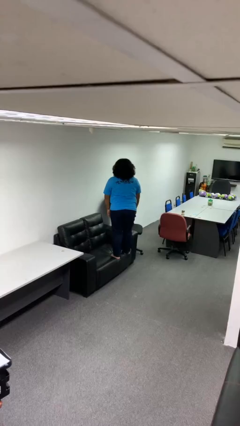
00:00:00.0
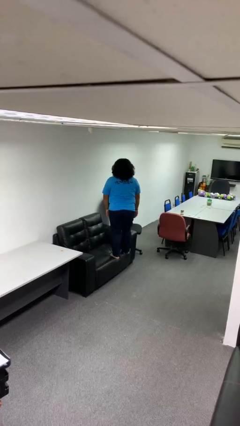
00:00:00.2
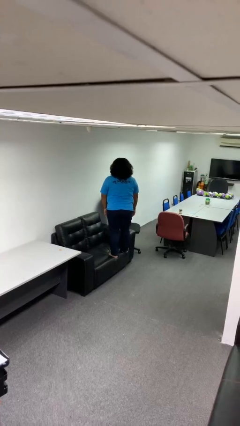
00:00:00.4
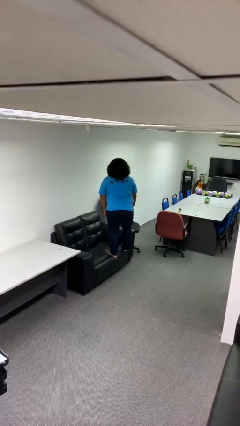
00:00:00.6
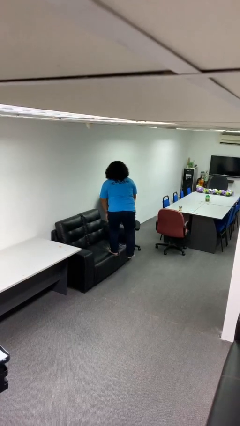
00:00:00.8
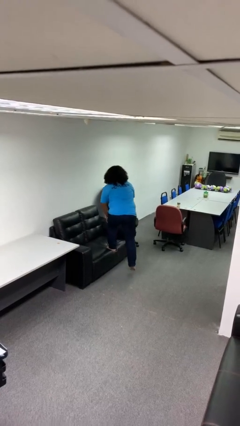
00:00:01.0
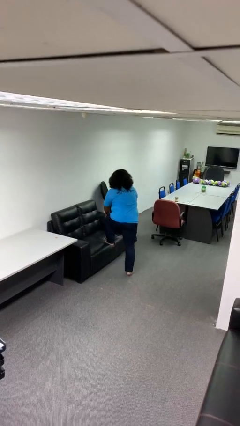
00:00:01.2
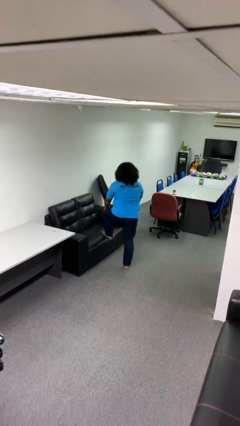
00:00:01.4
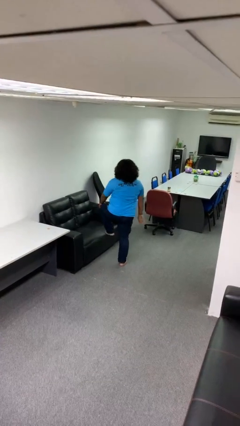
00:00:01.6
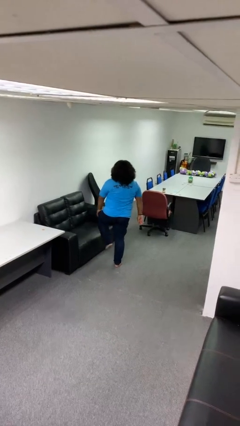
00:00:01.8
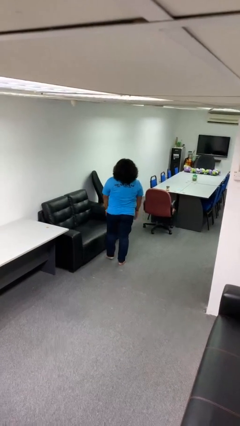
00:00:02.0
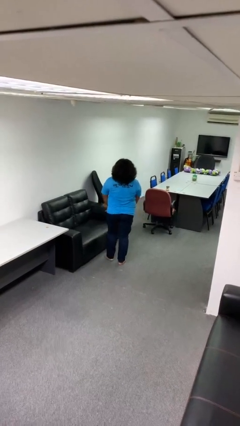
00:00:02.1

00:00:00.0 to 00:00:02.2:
person climbs off couch

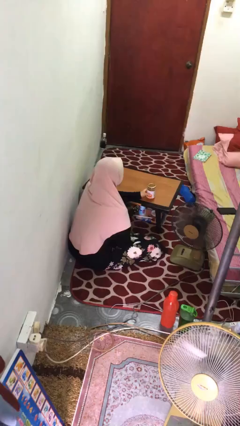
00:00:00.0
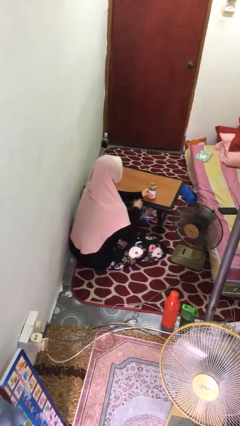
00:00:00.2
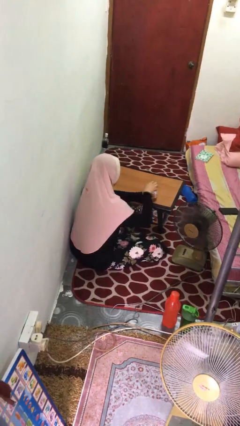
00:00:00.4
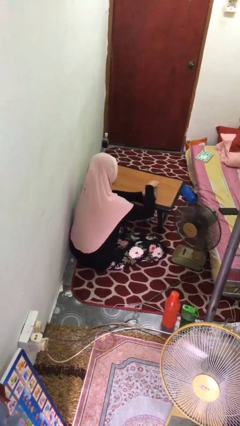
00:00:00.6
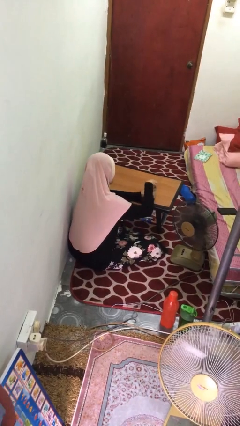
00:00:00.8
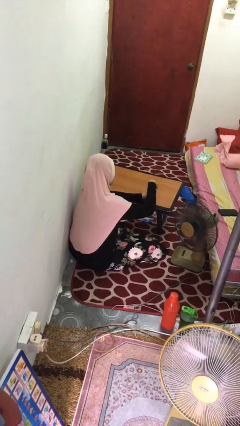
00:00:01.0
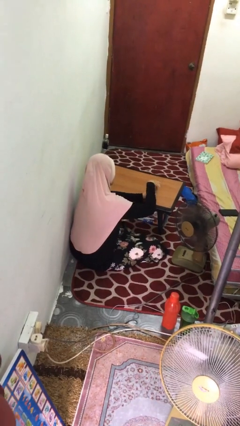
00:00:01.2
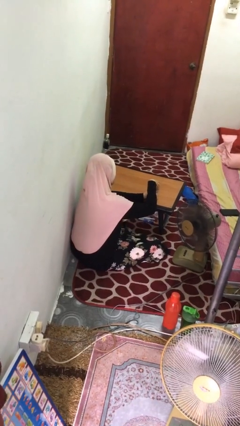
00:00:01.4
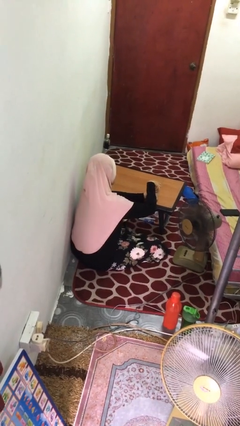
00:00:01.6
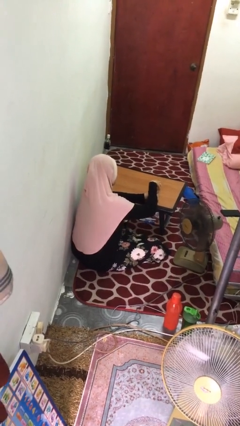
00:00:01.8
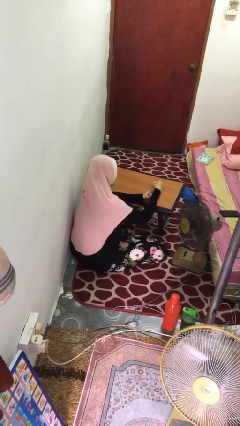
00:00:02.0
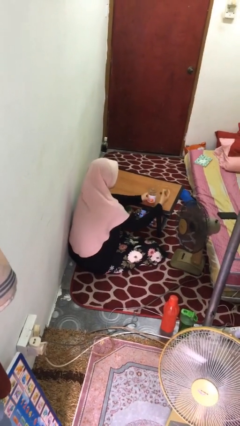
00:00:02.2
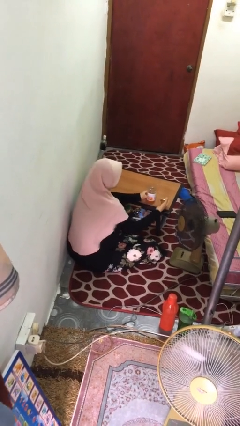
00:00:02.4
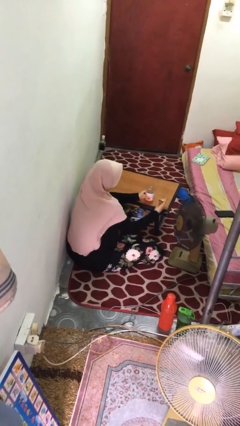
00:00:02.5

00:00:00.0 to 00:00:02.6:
person opens jar

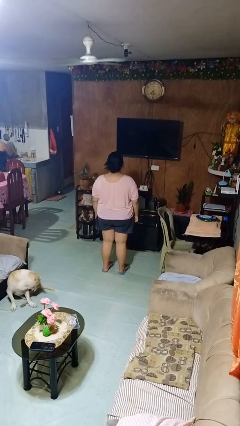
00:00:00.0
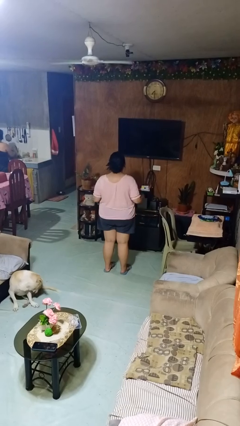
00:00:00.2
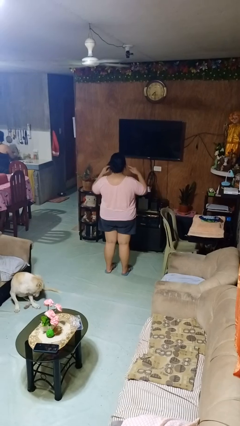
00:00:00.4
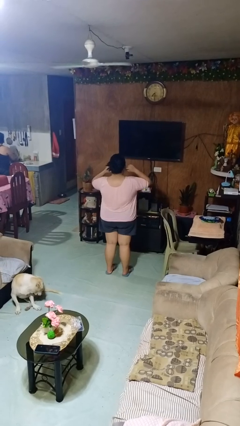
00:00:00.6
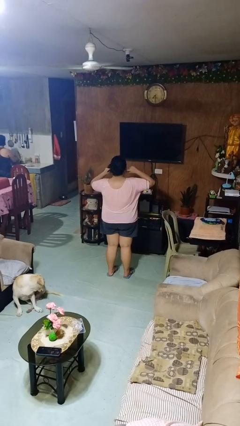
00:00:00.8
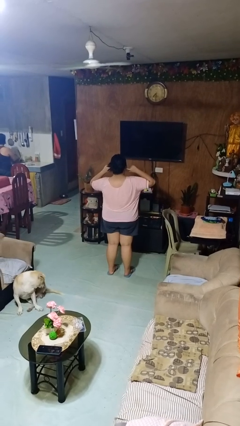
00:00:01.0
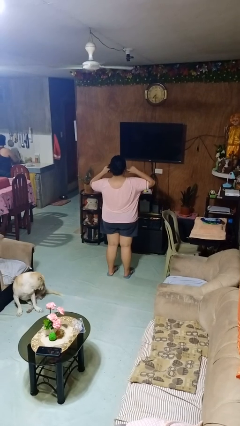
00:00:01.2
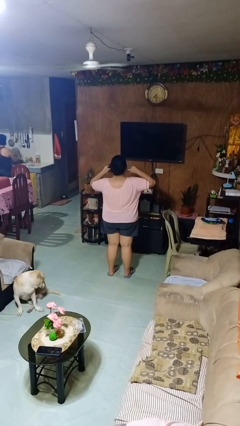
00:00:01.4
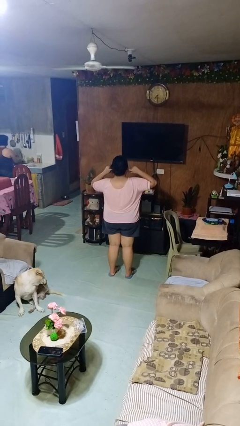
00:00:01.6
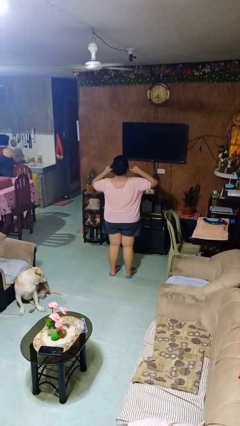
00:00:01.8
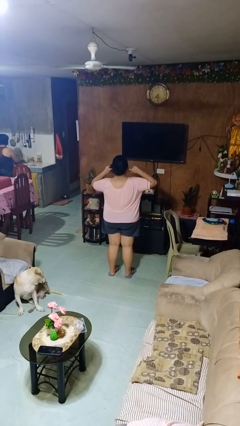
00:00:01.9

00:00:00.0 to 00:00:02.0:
person puts fingers in ear

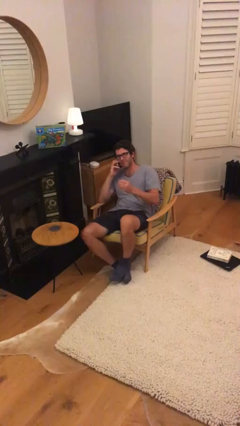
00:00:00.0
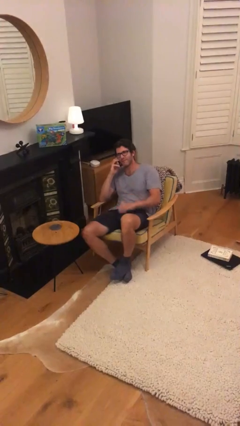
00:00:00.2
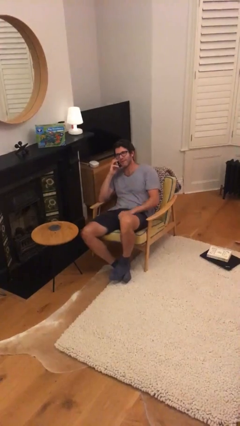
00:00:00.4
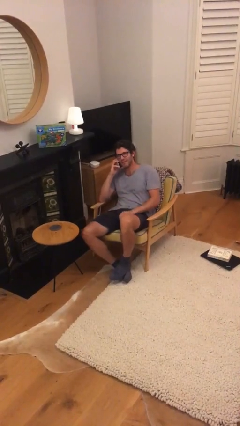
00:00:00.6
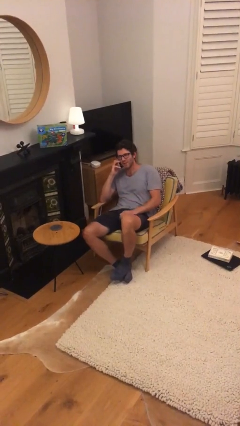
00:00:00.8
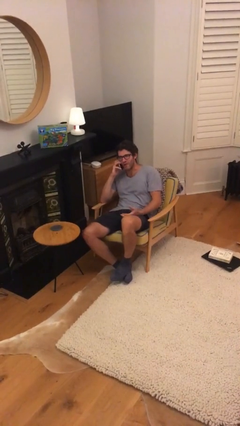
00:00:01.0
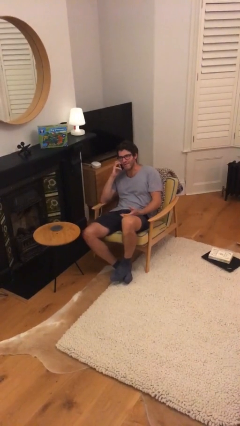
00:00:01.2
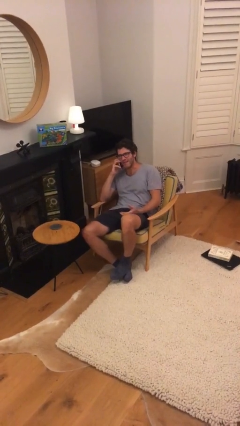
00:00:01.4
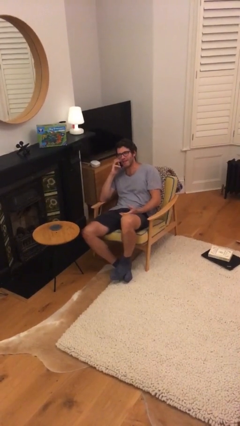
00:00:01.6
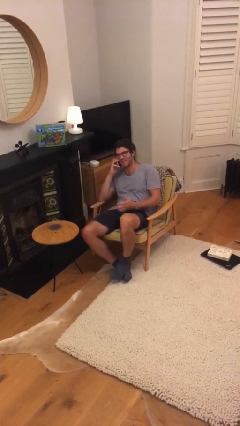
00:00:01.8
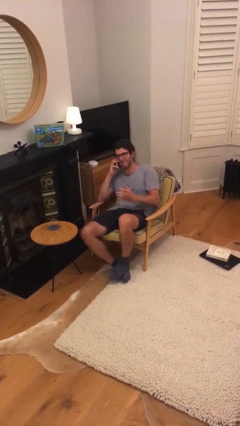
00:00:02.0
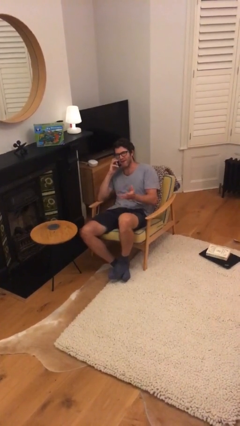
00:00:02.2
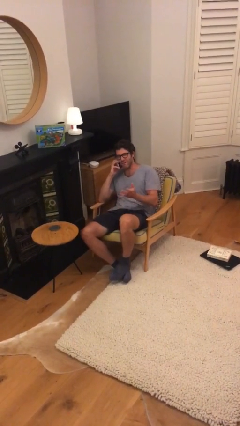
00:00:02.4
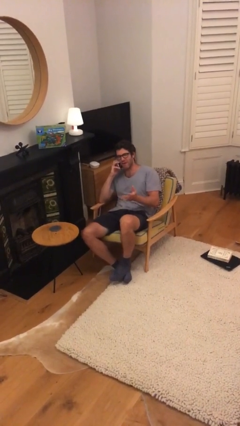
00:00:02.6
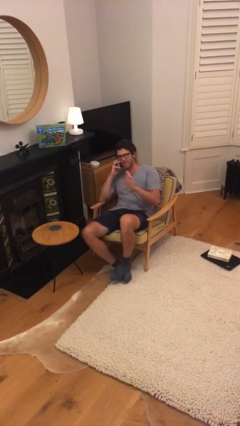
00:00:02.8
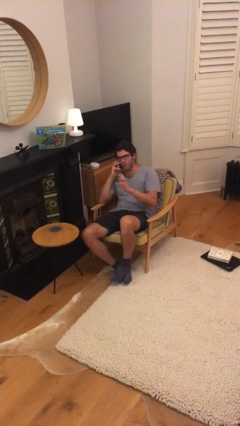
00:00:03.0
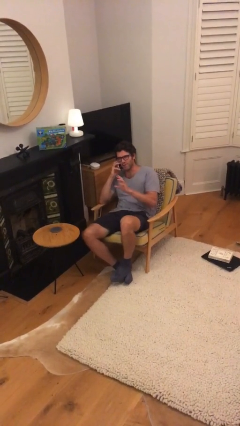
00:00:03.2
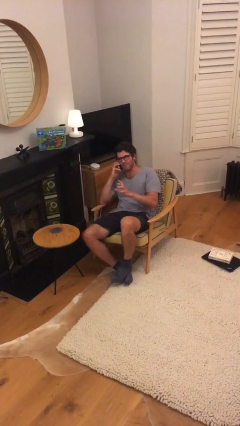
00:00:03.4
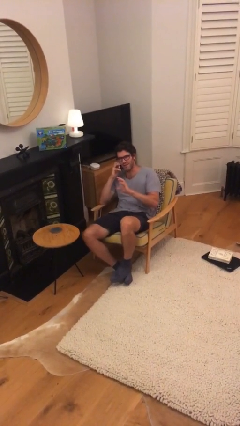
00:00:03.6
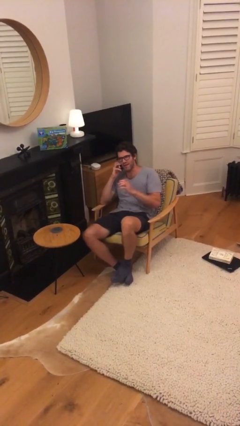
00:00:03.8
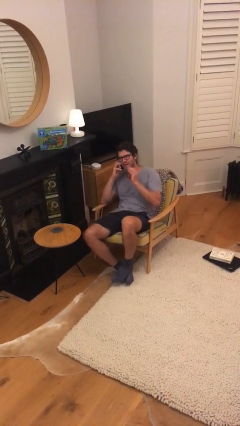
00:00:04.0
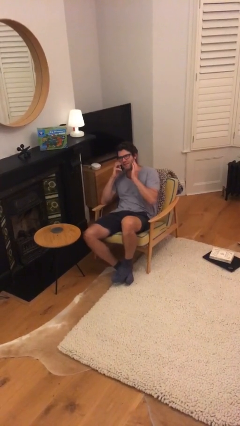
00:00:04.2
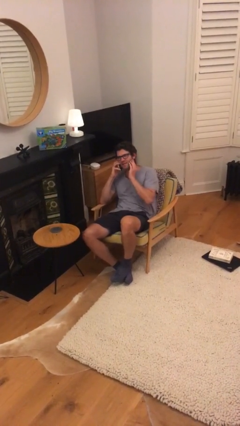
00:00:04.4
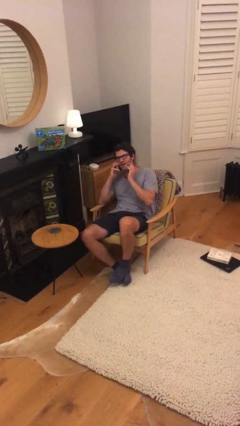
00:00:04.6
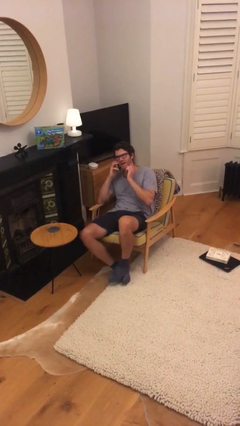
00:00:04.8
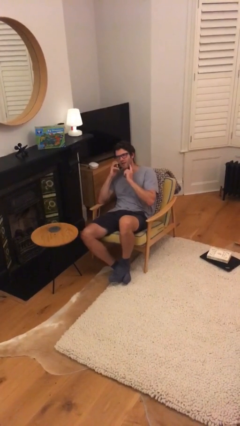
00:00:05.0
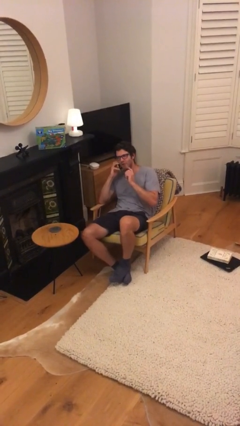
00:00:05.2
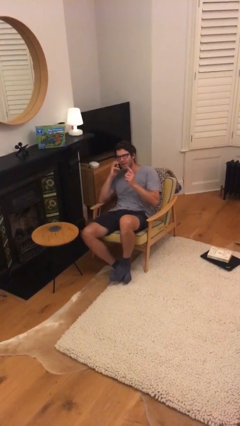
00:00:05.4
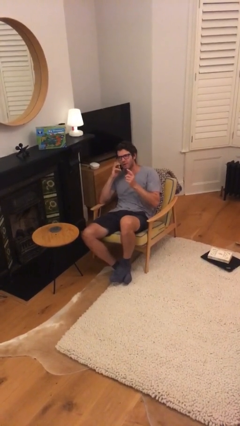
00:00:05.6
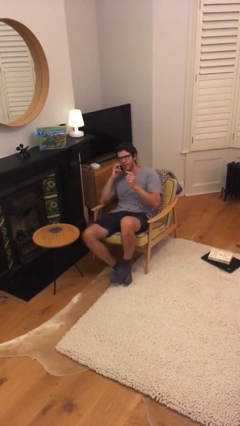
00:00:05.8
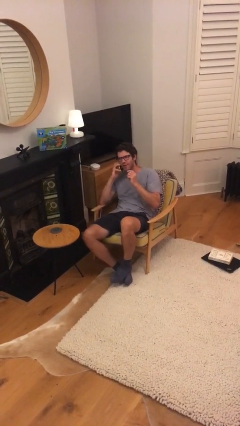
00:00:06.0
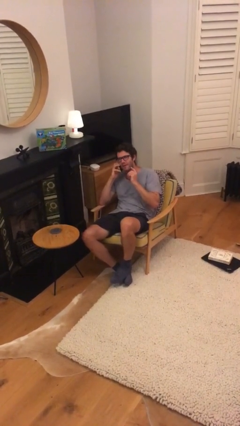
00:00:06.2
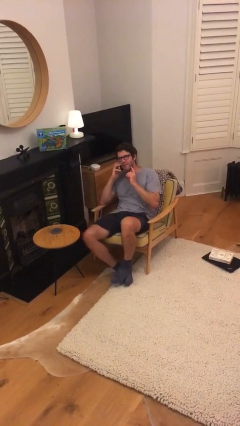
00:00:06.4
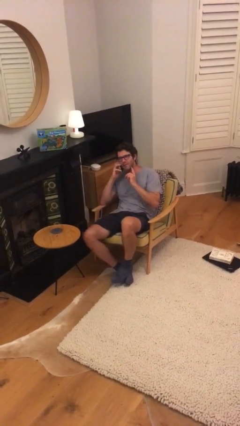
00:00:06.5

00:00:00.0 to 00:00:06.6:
person talks on phone

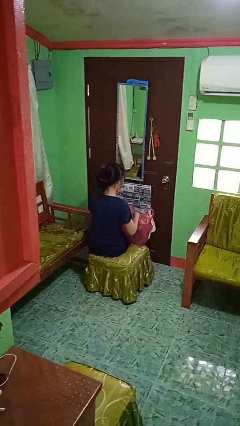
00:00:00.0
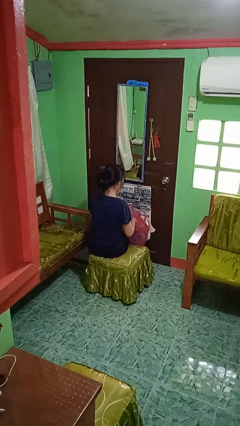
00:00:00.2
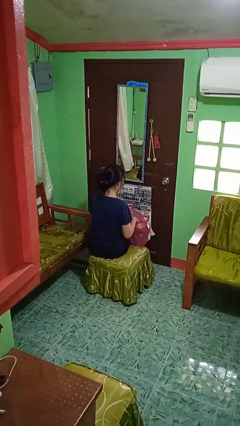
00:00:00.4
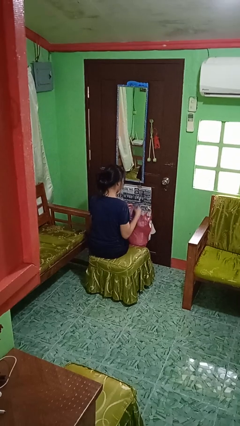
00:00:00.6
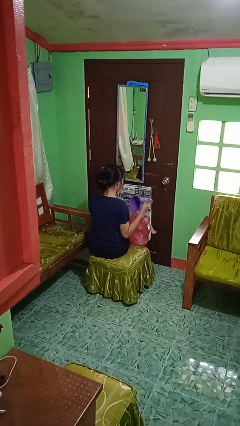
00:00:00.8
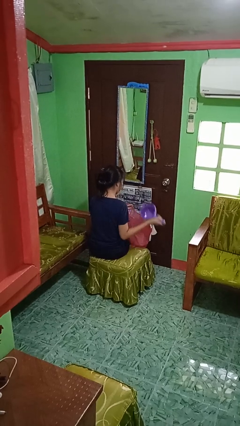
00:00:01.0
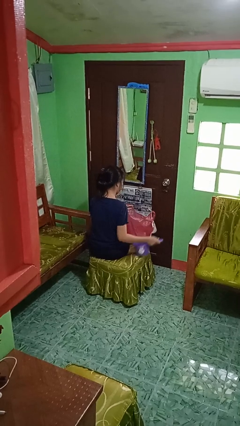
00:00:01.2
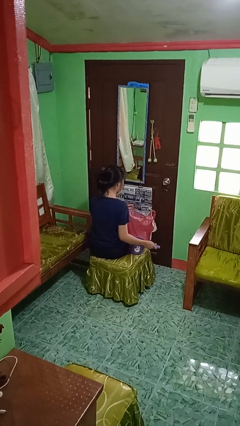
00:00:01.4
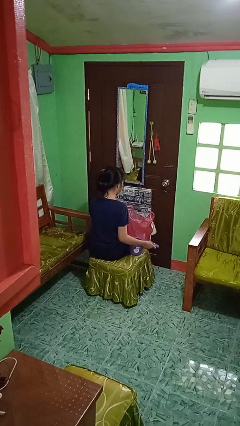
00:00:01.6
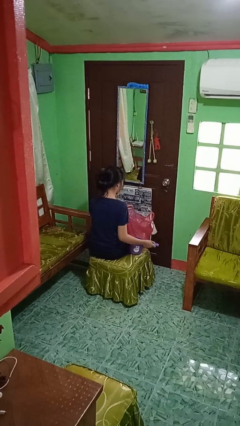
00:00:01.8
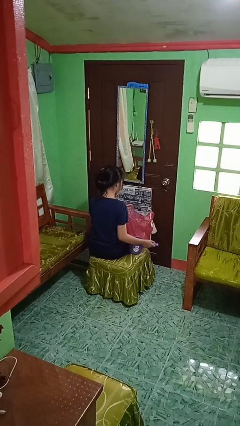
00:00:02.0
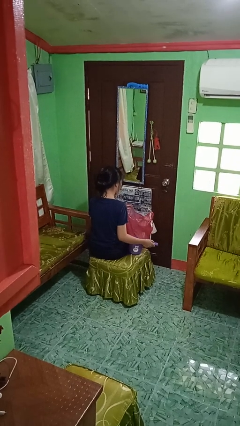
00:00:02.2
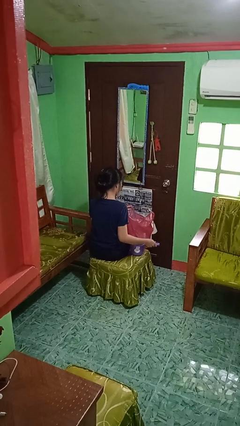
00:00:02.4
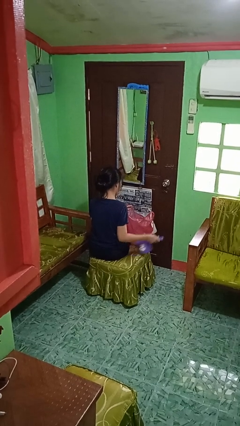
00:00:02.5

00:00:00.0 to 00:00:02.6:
person takes object from bag

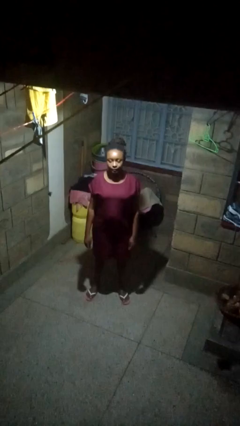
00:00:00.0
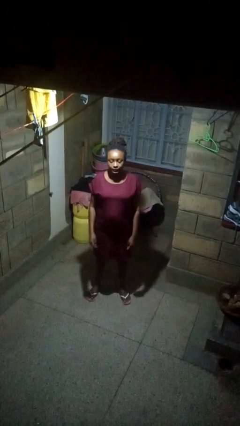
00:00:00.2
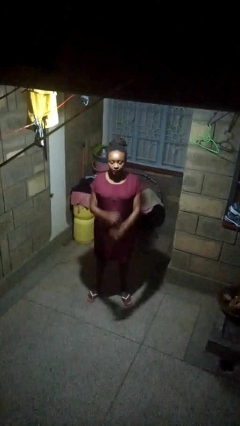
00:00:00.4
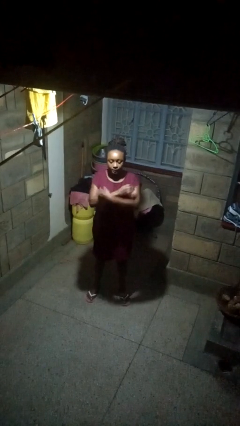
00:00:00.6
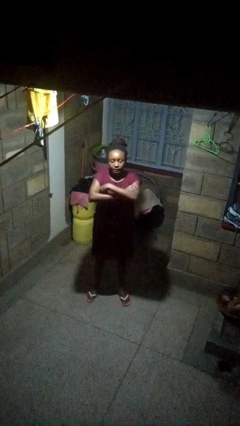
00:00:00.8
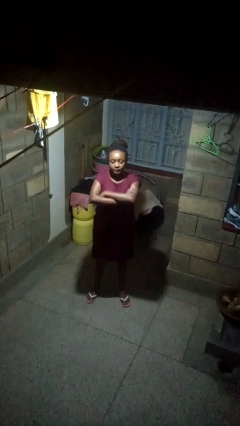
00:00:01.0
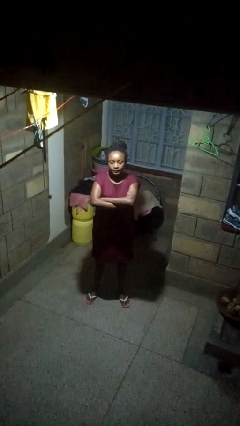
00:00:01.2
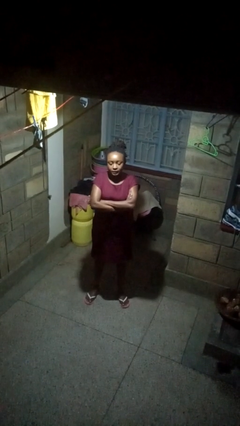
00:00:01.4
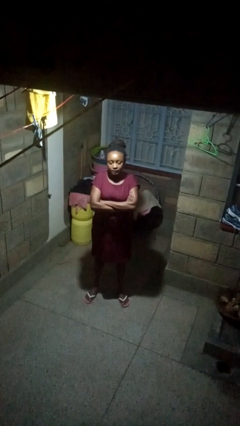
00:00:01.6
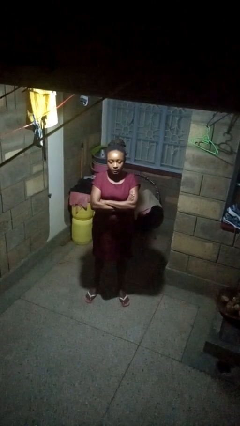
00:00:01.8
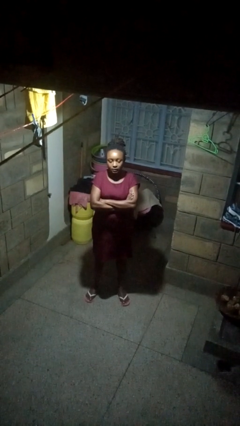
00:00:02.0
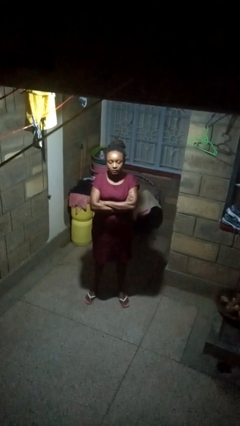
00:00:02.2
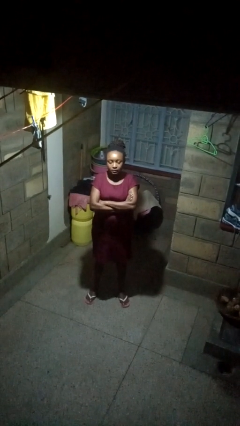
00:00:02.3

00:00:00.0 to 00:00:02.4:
person crosses arms
